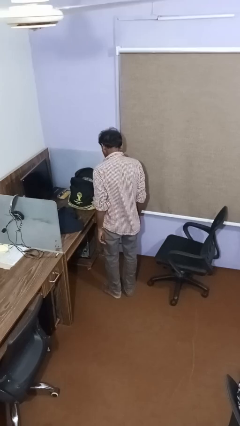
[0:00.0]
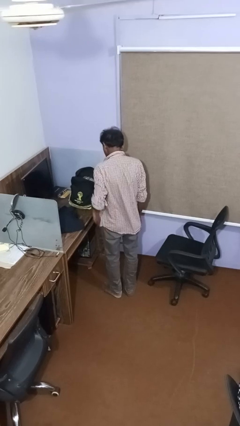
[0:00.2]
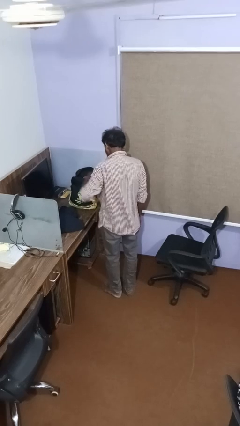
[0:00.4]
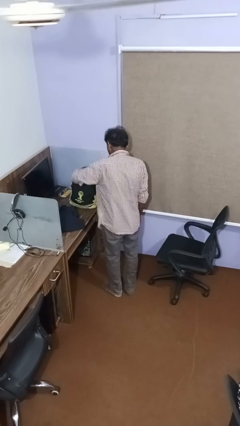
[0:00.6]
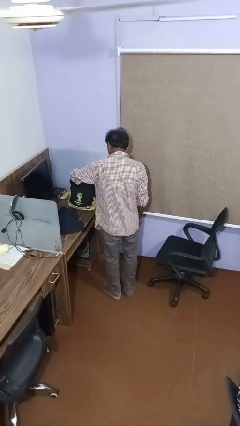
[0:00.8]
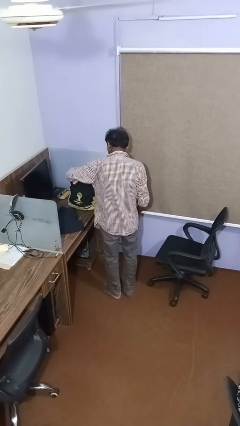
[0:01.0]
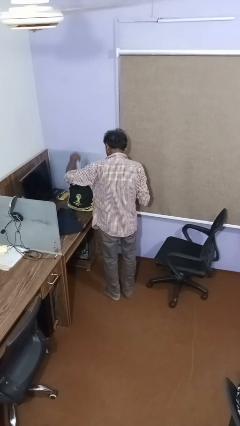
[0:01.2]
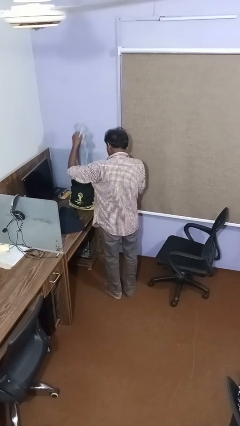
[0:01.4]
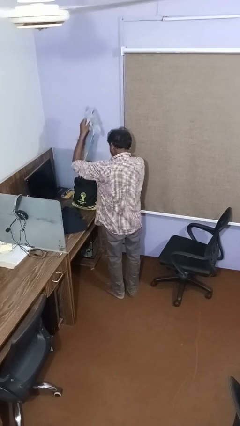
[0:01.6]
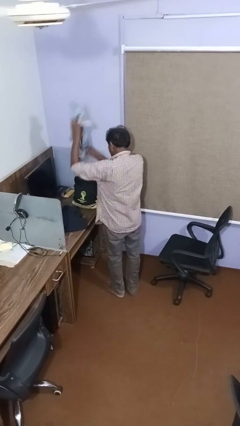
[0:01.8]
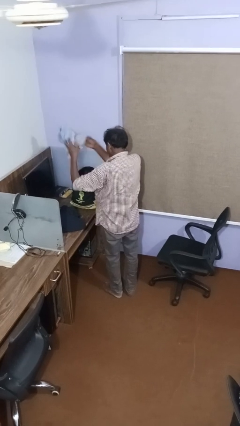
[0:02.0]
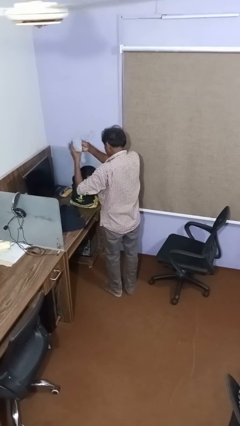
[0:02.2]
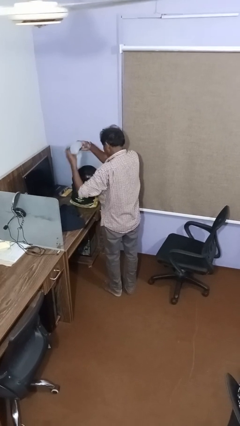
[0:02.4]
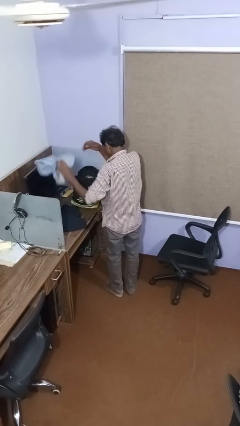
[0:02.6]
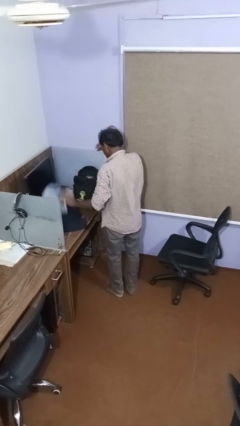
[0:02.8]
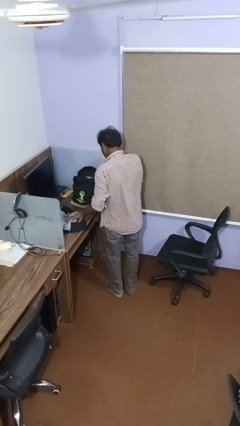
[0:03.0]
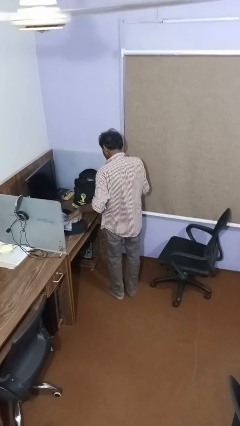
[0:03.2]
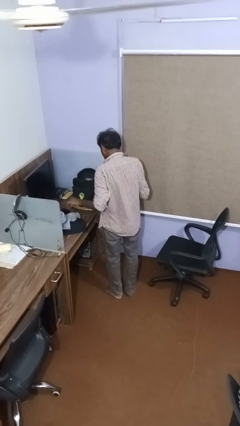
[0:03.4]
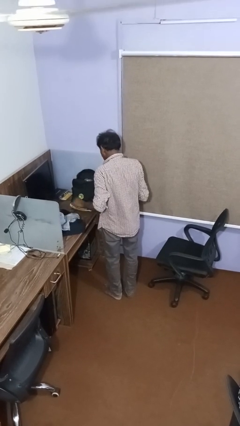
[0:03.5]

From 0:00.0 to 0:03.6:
person unloads clothes from suitcase

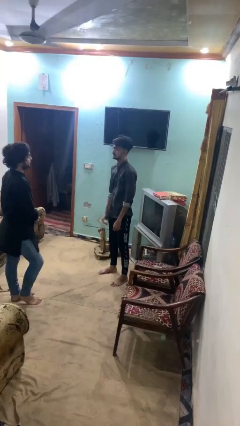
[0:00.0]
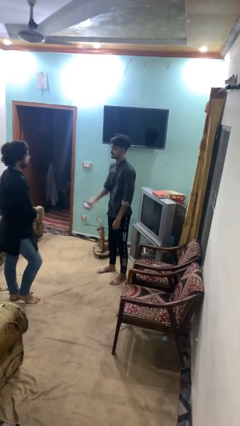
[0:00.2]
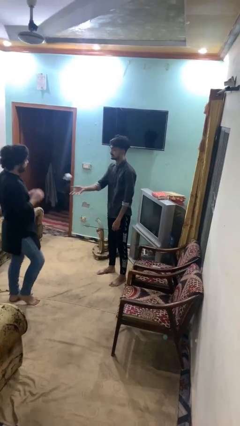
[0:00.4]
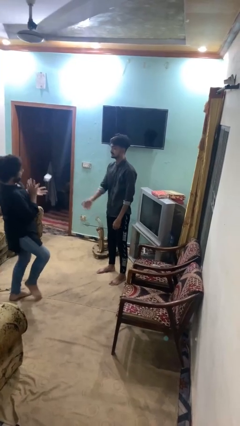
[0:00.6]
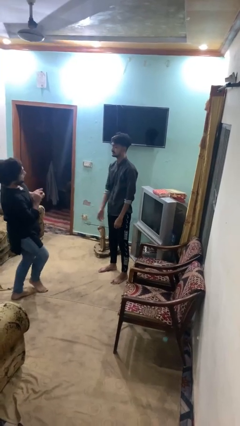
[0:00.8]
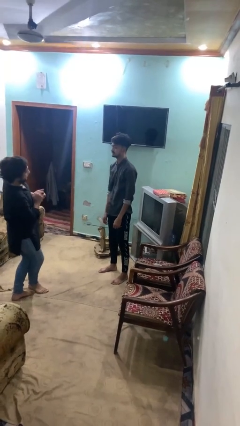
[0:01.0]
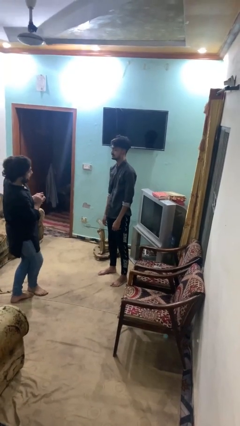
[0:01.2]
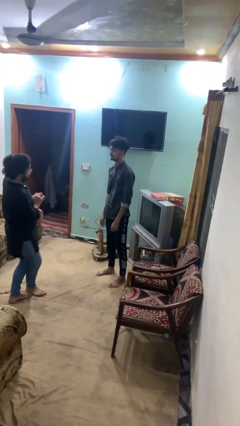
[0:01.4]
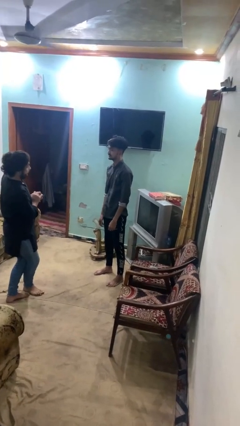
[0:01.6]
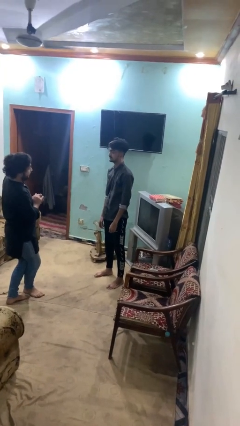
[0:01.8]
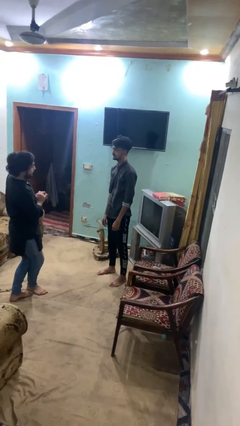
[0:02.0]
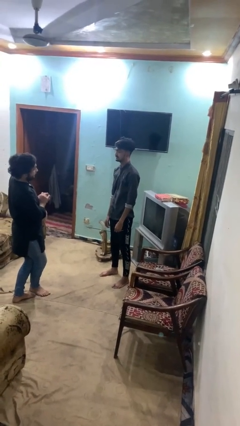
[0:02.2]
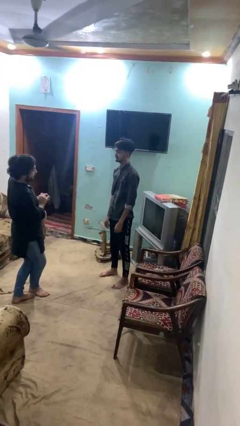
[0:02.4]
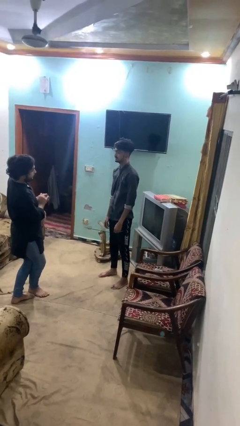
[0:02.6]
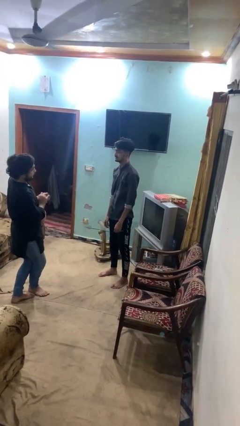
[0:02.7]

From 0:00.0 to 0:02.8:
person throws object to person

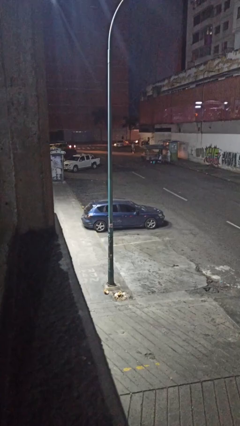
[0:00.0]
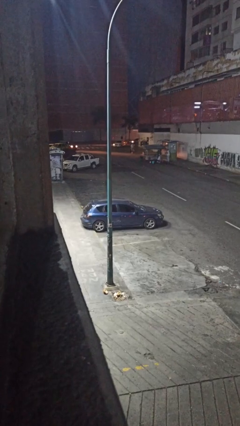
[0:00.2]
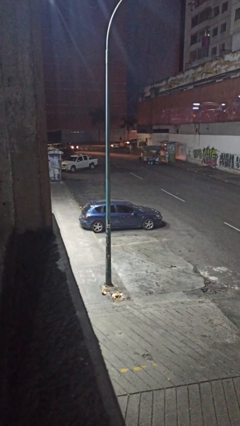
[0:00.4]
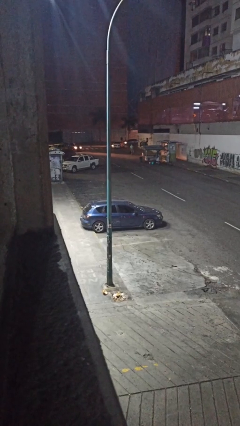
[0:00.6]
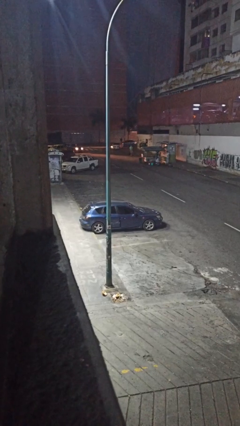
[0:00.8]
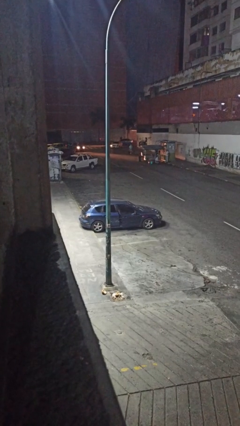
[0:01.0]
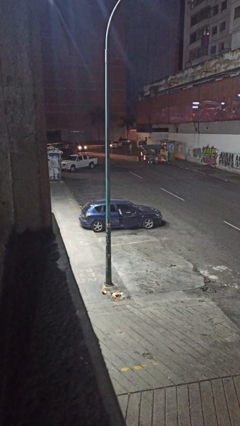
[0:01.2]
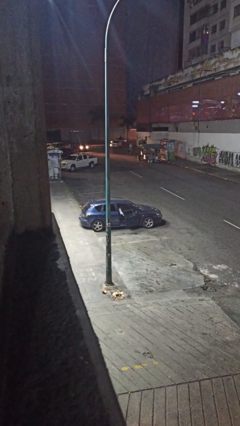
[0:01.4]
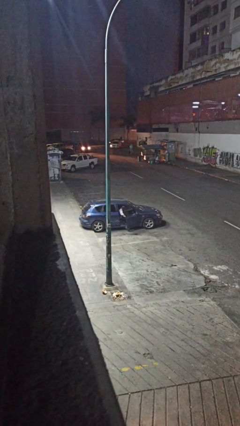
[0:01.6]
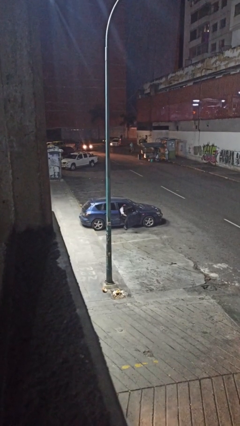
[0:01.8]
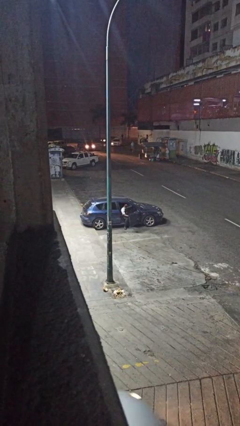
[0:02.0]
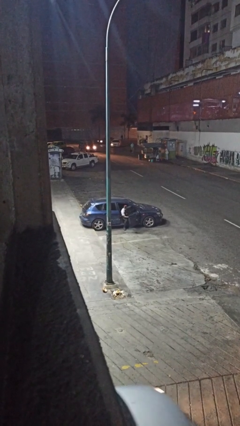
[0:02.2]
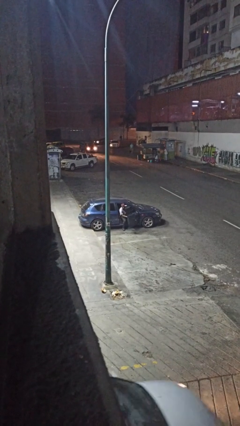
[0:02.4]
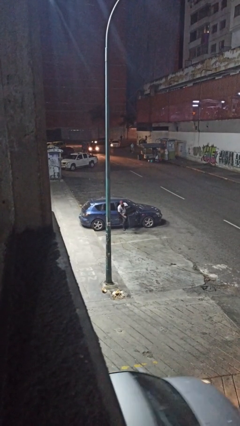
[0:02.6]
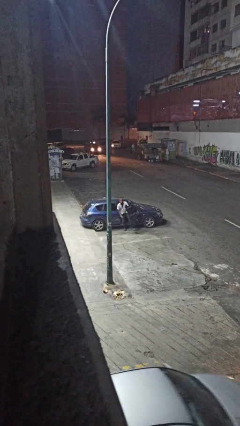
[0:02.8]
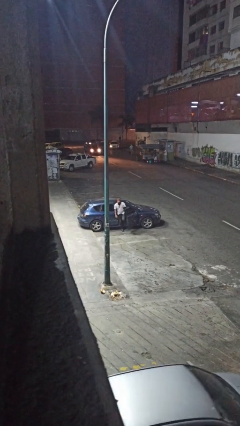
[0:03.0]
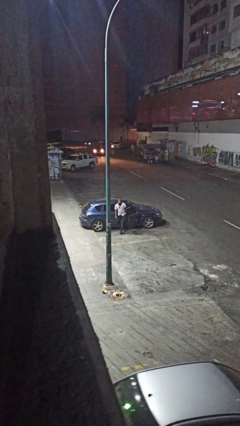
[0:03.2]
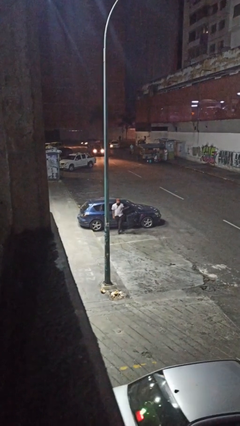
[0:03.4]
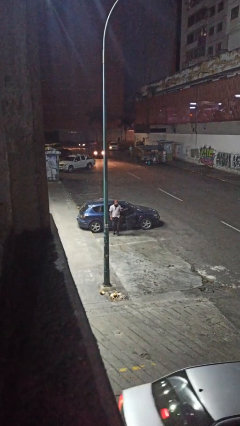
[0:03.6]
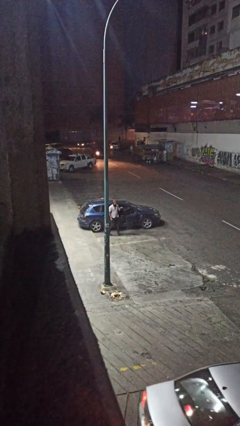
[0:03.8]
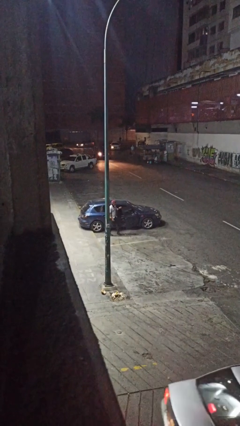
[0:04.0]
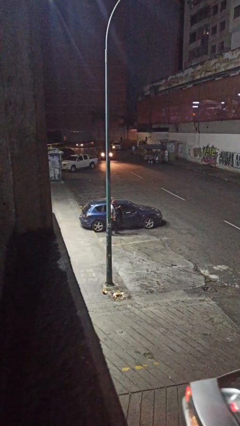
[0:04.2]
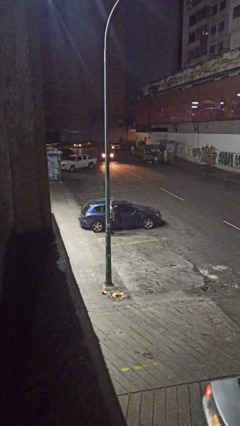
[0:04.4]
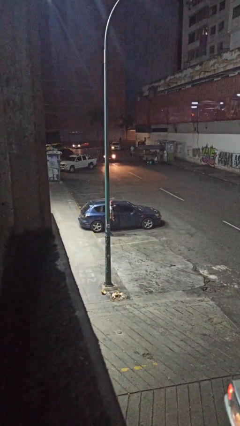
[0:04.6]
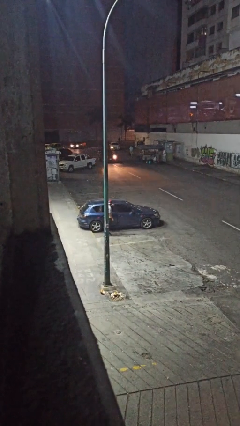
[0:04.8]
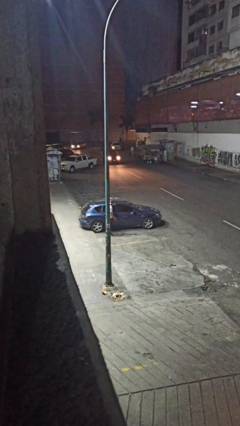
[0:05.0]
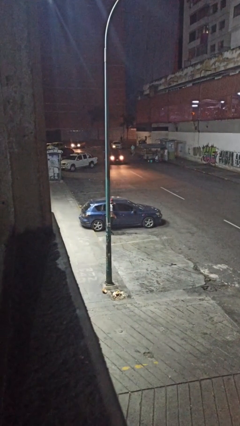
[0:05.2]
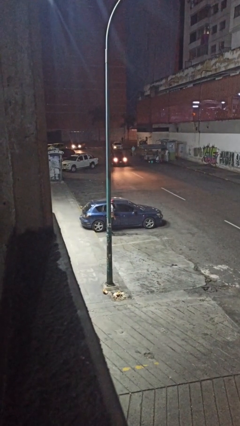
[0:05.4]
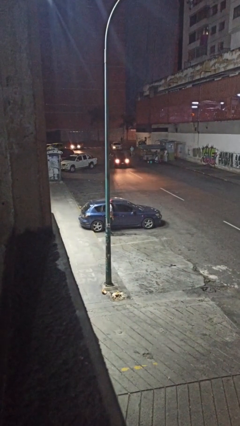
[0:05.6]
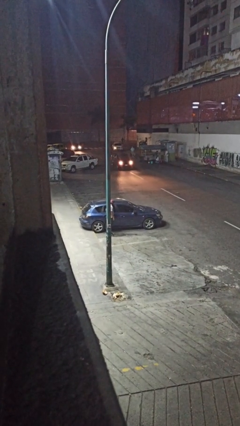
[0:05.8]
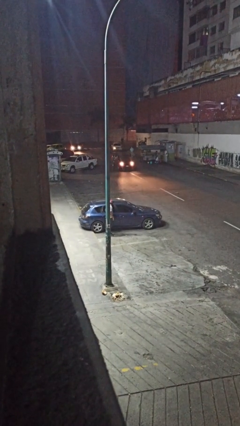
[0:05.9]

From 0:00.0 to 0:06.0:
car drops off person

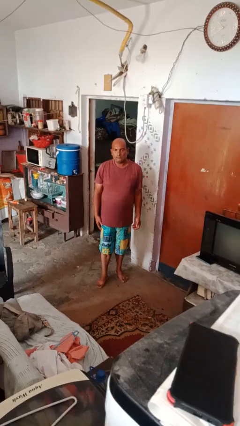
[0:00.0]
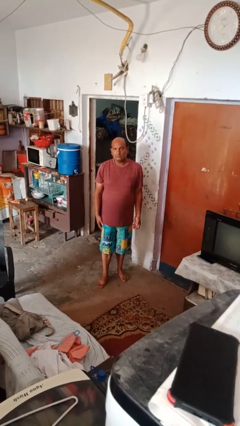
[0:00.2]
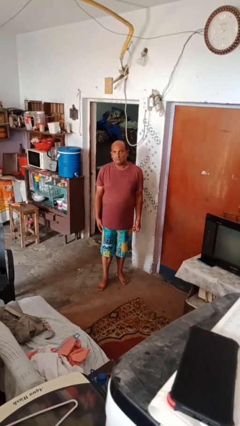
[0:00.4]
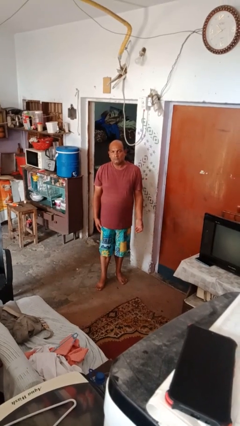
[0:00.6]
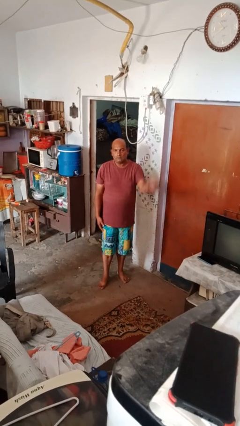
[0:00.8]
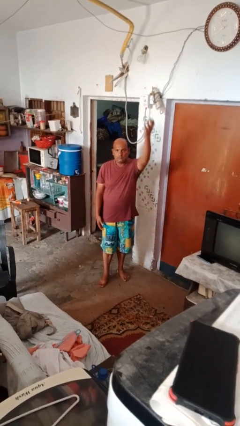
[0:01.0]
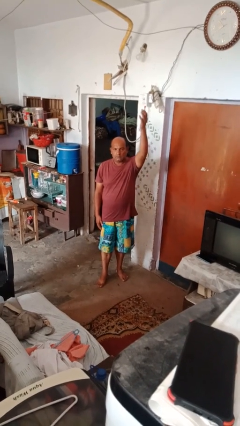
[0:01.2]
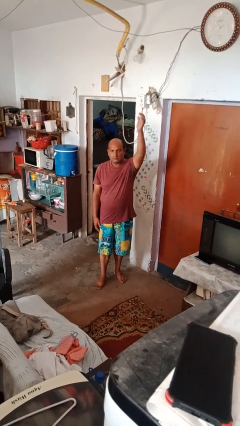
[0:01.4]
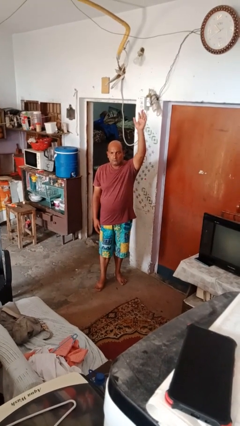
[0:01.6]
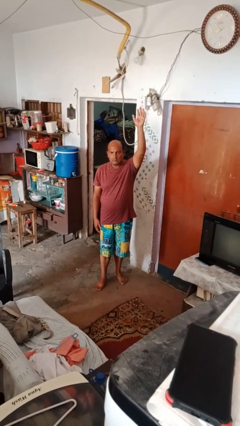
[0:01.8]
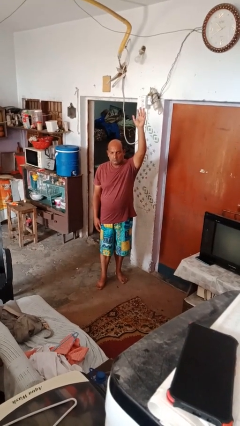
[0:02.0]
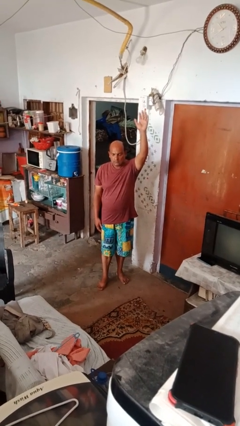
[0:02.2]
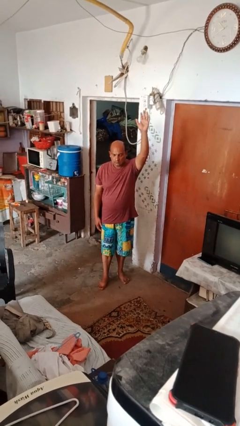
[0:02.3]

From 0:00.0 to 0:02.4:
person gestures swipe up

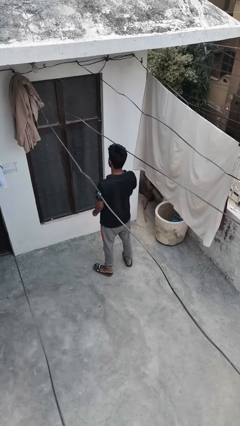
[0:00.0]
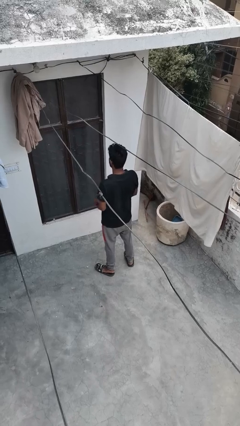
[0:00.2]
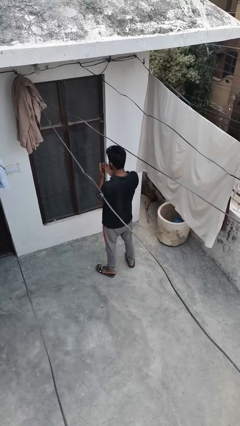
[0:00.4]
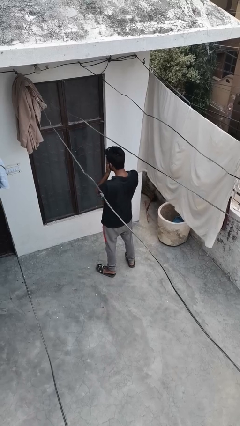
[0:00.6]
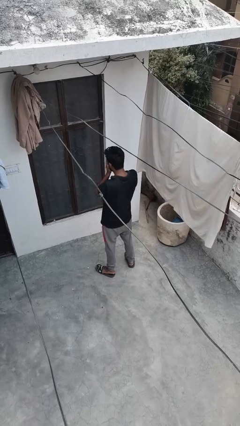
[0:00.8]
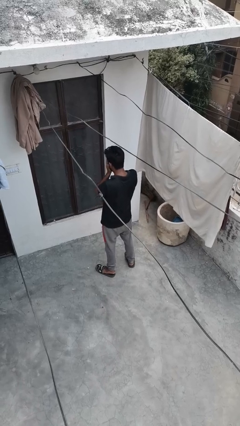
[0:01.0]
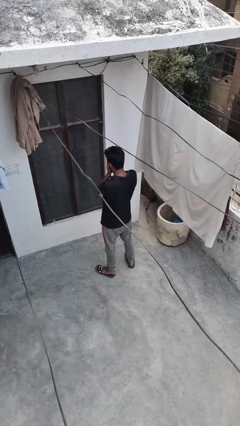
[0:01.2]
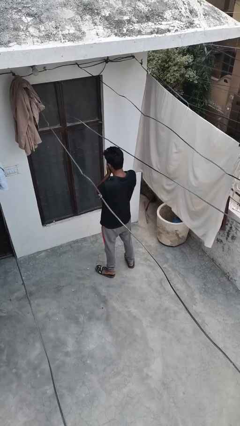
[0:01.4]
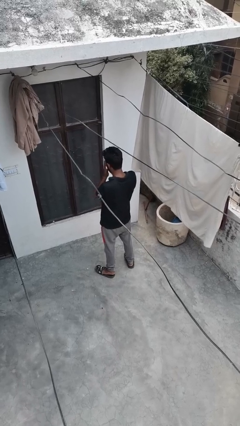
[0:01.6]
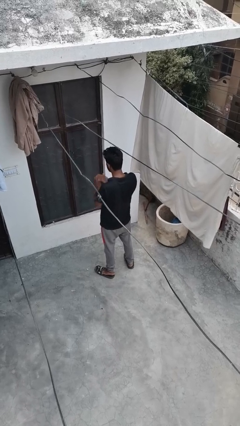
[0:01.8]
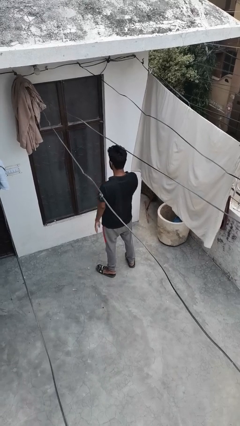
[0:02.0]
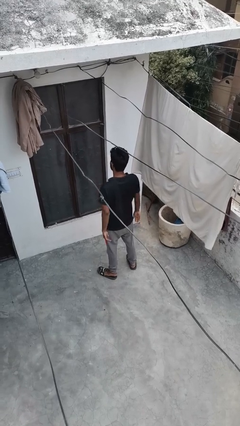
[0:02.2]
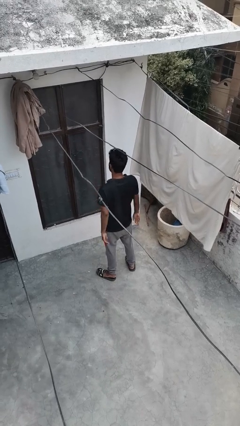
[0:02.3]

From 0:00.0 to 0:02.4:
person covers face with hands

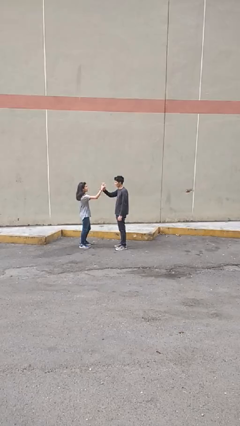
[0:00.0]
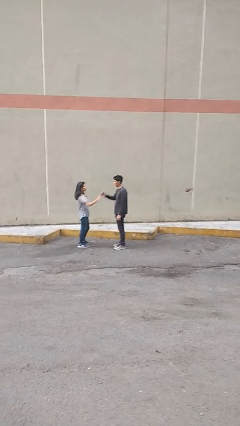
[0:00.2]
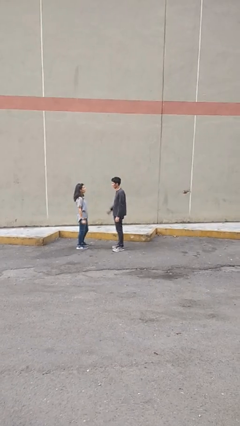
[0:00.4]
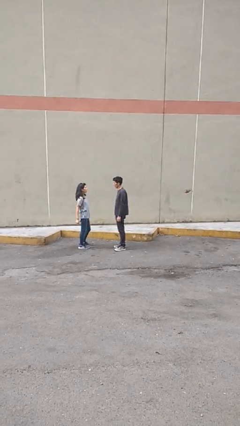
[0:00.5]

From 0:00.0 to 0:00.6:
person highfives hand
